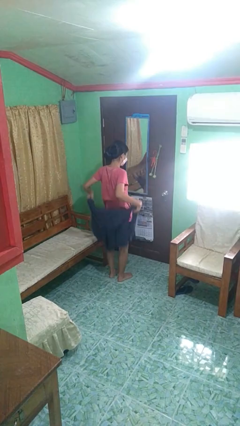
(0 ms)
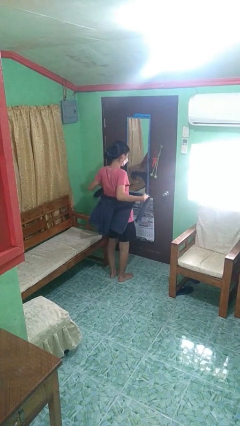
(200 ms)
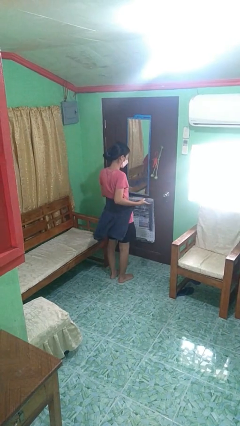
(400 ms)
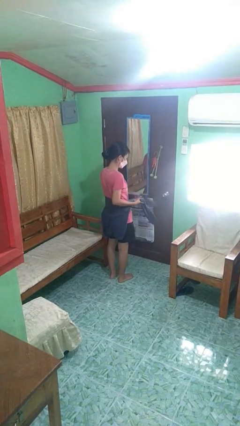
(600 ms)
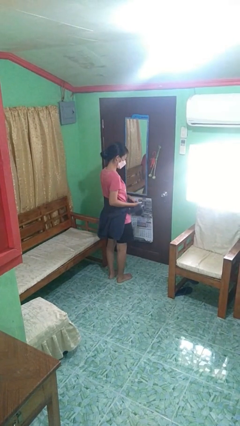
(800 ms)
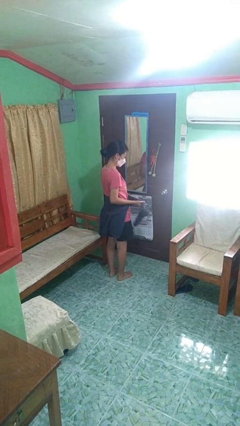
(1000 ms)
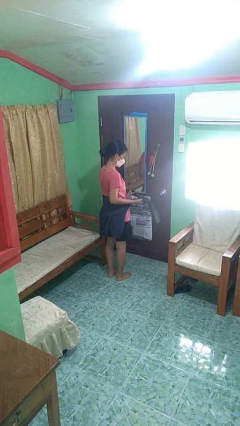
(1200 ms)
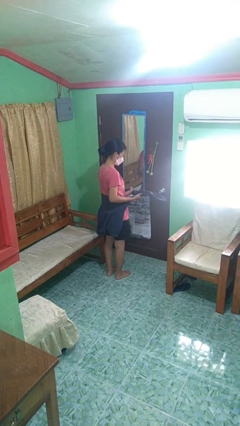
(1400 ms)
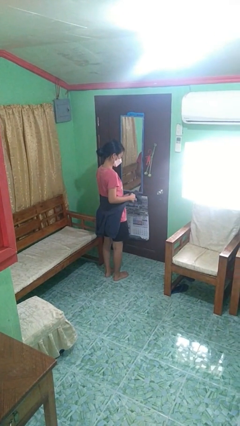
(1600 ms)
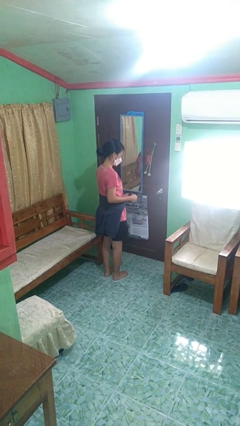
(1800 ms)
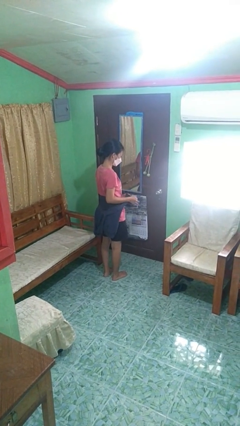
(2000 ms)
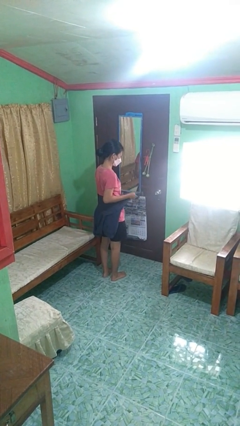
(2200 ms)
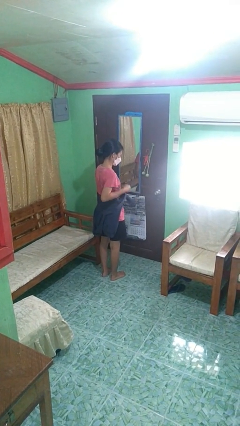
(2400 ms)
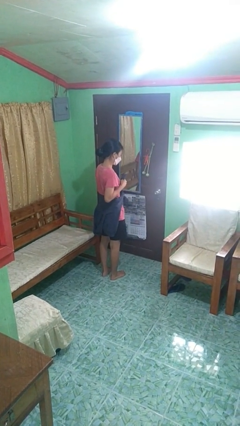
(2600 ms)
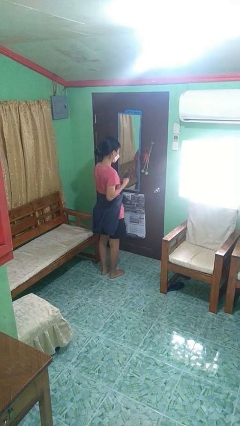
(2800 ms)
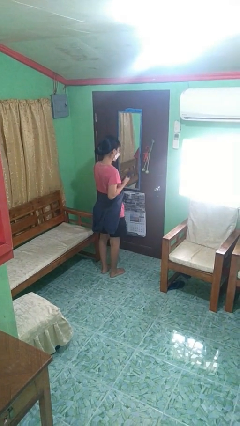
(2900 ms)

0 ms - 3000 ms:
person ties jacket around waist

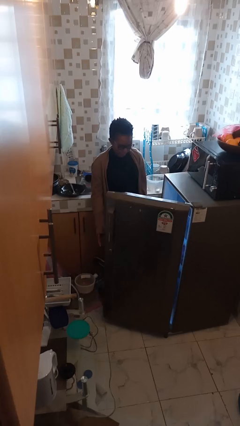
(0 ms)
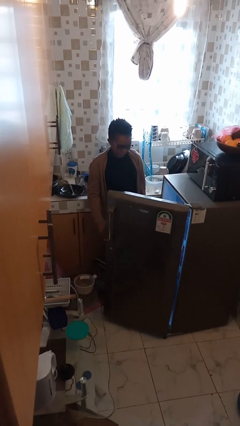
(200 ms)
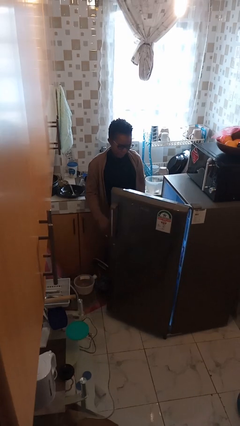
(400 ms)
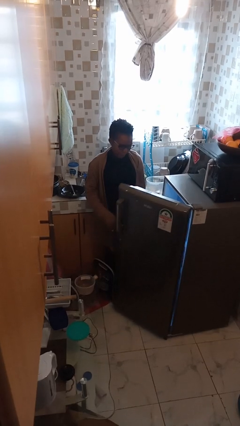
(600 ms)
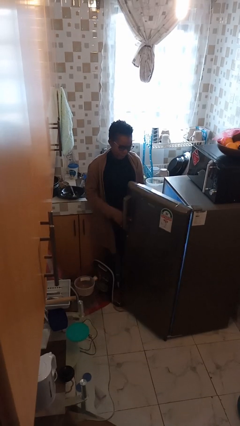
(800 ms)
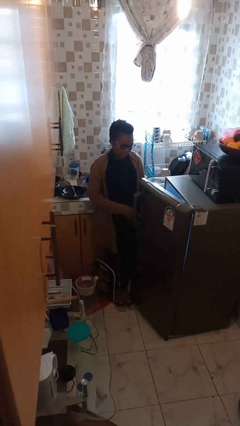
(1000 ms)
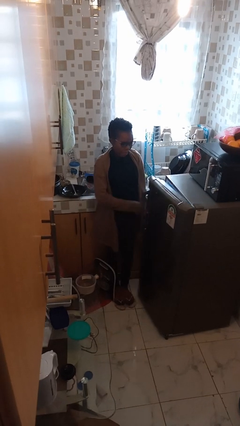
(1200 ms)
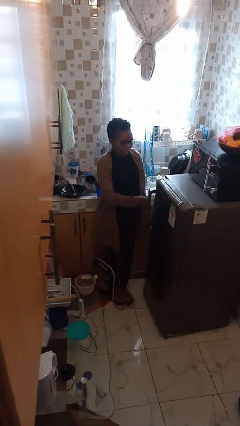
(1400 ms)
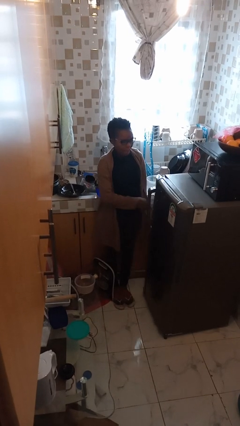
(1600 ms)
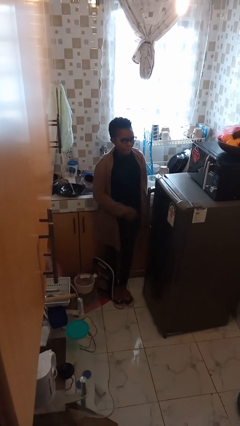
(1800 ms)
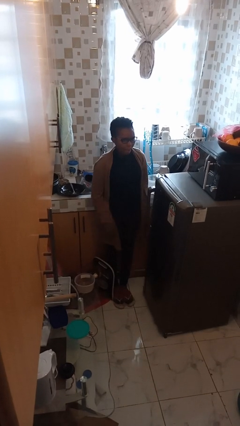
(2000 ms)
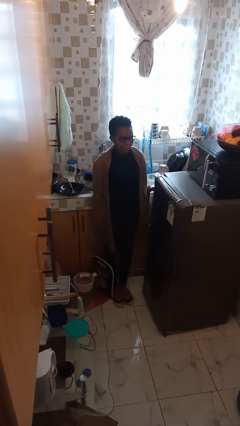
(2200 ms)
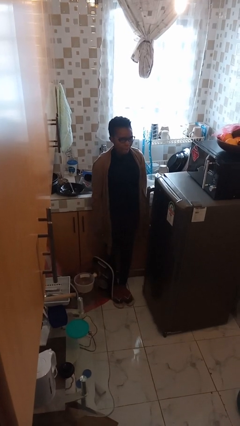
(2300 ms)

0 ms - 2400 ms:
person closes refrigerator

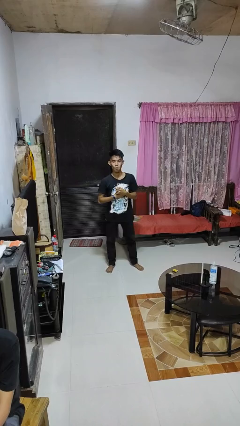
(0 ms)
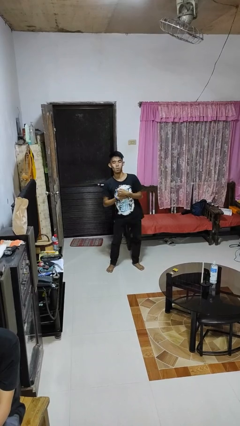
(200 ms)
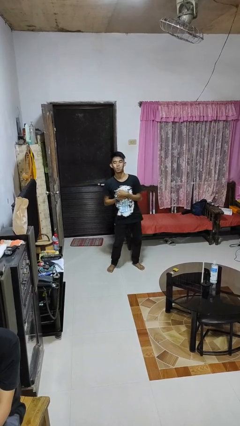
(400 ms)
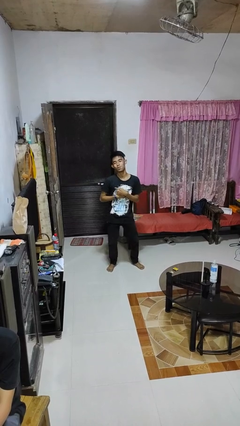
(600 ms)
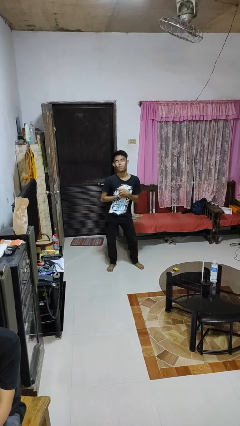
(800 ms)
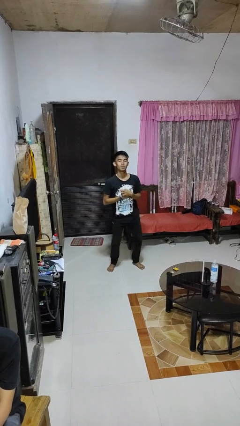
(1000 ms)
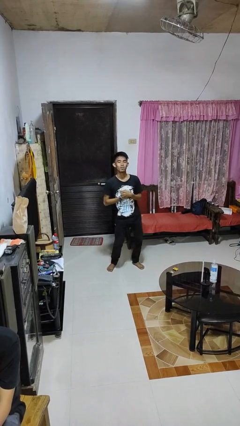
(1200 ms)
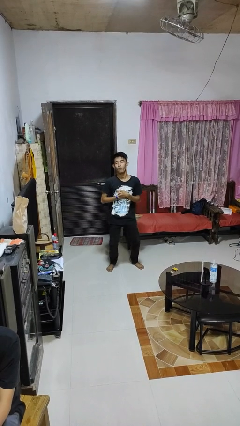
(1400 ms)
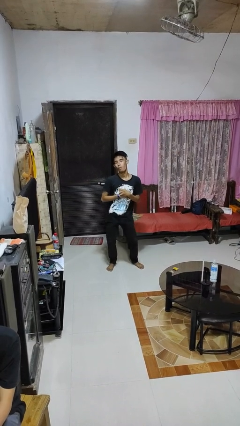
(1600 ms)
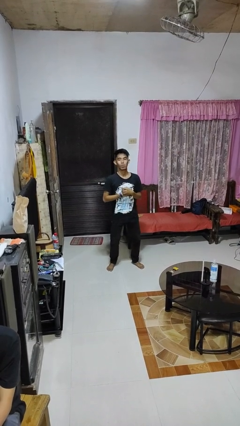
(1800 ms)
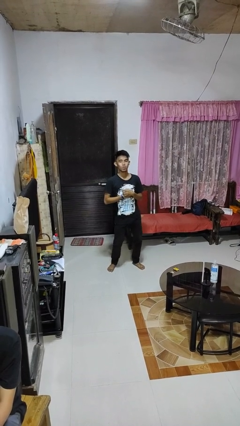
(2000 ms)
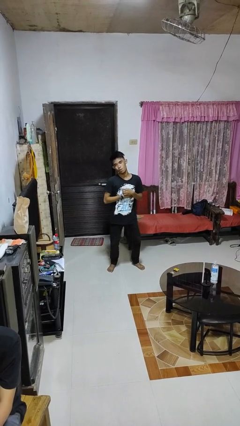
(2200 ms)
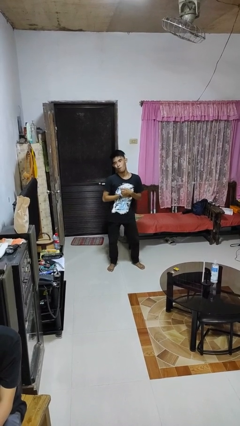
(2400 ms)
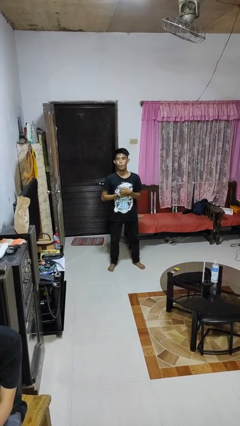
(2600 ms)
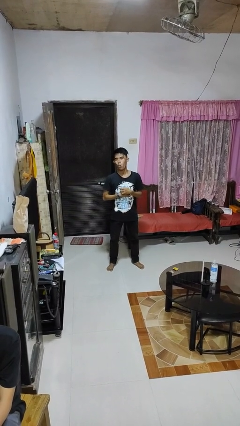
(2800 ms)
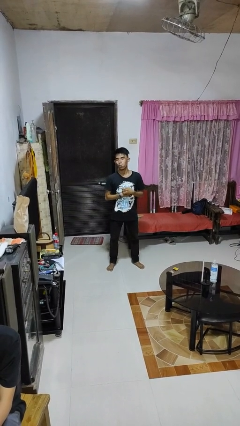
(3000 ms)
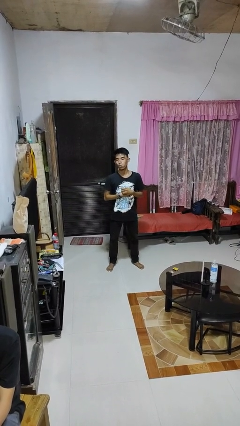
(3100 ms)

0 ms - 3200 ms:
person wiggles hips

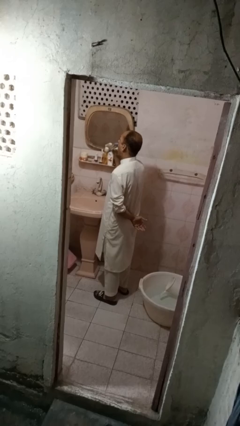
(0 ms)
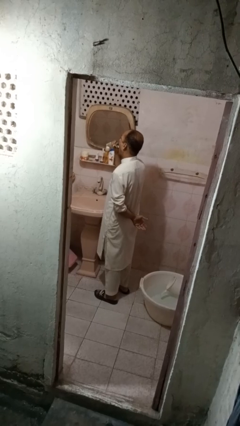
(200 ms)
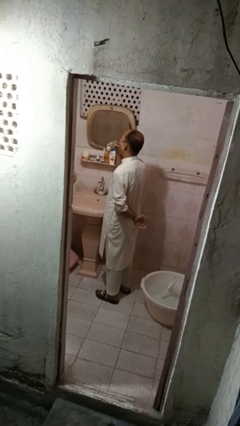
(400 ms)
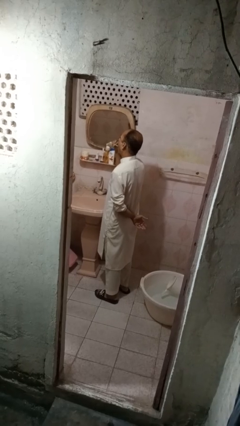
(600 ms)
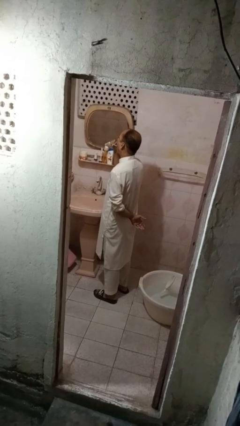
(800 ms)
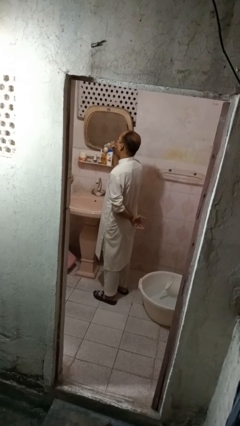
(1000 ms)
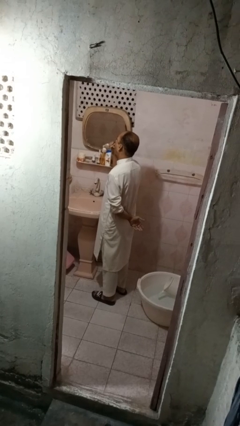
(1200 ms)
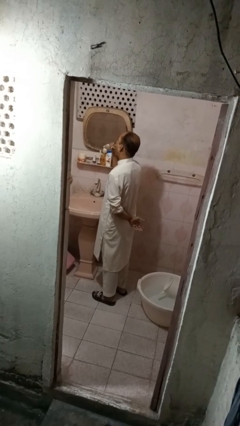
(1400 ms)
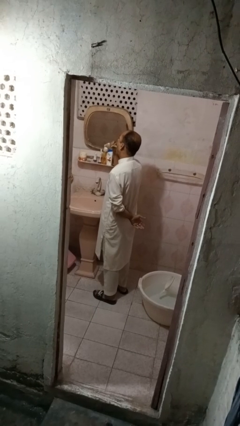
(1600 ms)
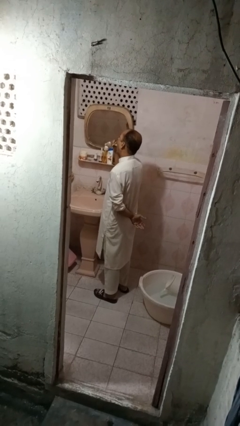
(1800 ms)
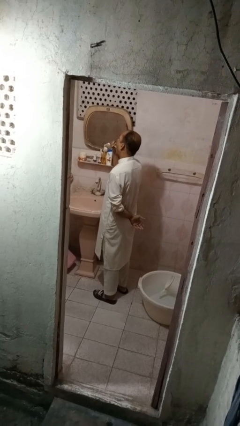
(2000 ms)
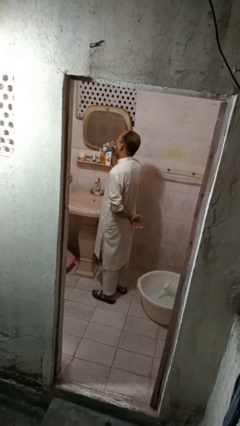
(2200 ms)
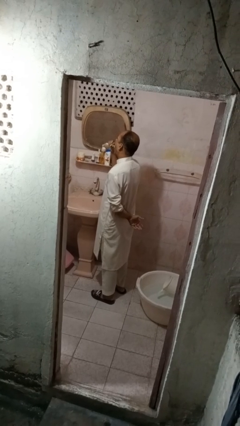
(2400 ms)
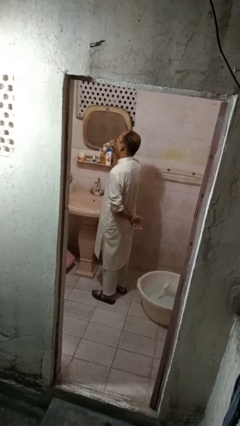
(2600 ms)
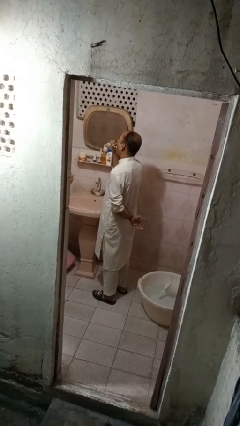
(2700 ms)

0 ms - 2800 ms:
person brushes teeth

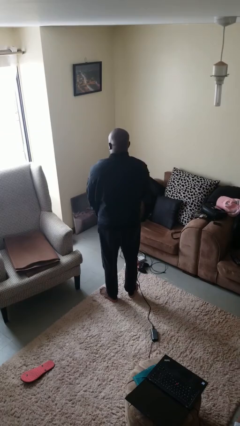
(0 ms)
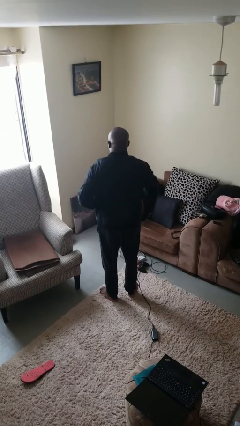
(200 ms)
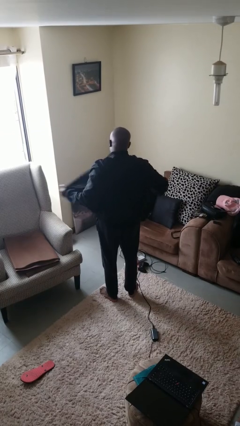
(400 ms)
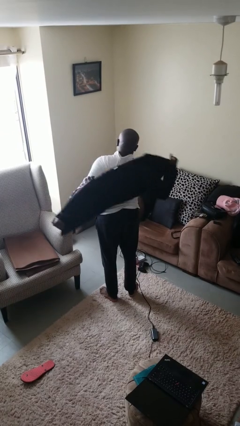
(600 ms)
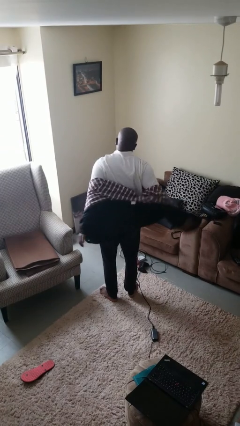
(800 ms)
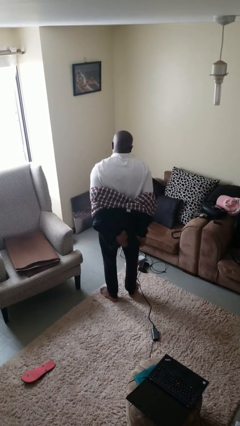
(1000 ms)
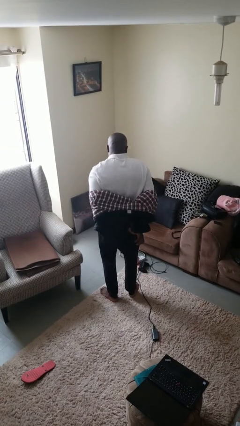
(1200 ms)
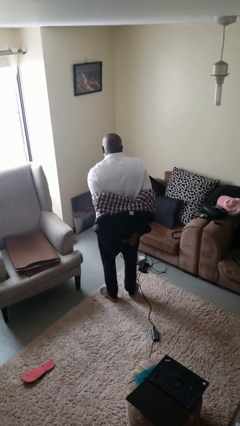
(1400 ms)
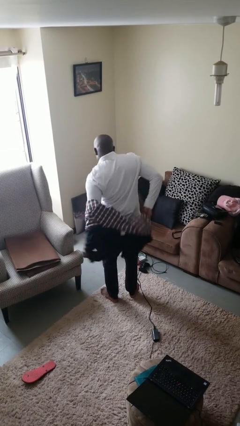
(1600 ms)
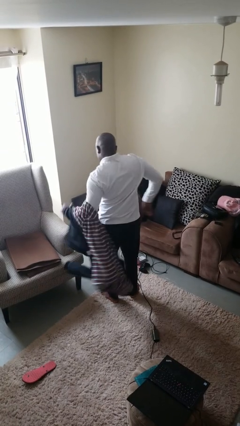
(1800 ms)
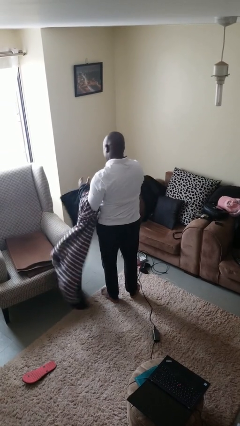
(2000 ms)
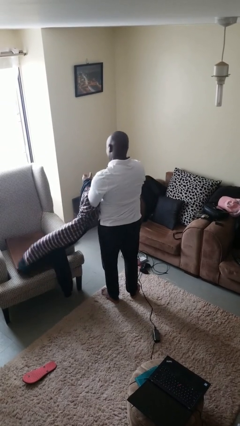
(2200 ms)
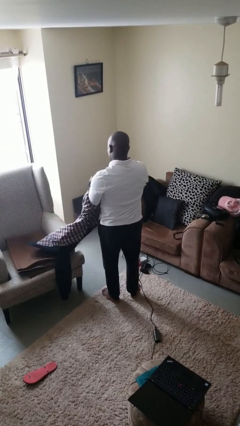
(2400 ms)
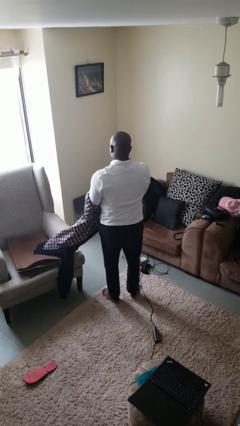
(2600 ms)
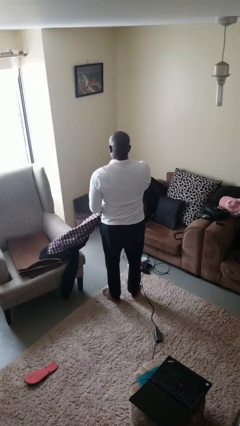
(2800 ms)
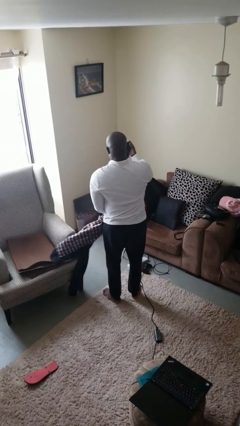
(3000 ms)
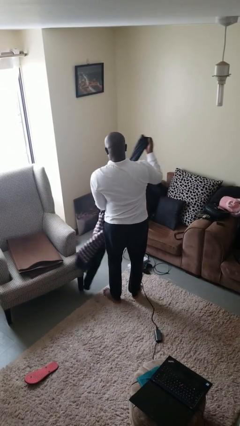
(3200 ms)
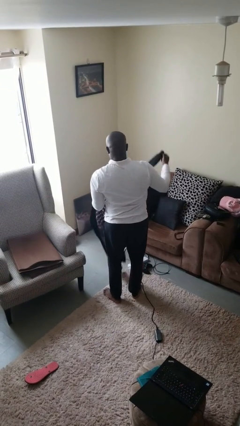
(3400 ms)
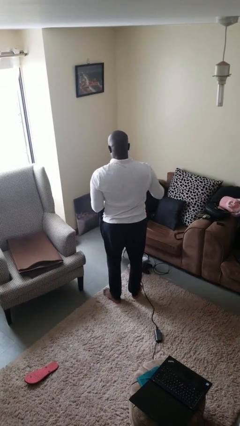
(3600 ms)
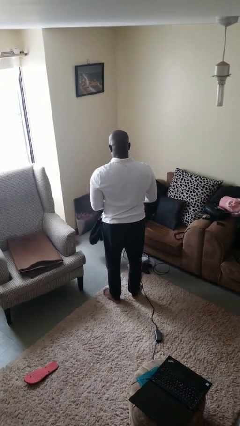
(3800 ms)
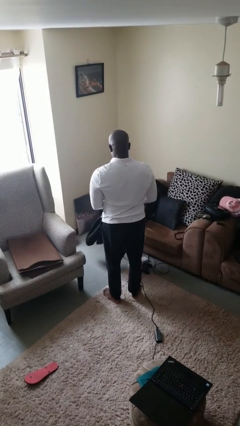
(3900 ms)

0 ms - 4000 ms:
person takes off jacket

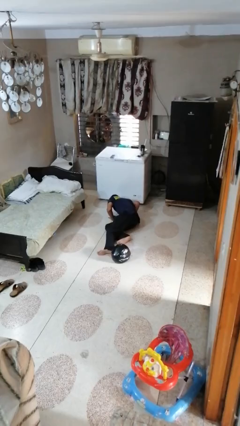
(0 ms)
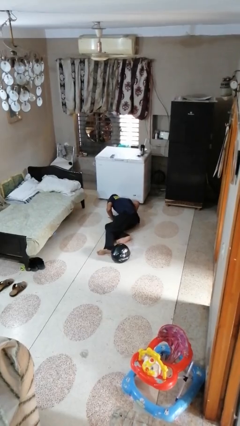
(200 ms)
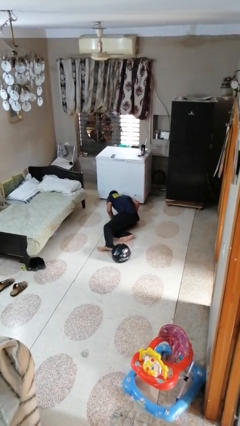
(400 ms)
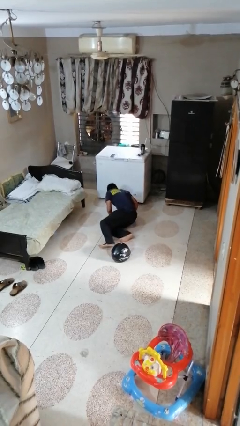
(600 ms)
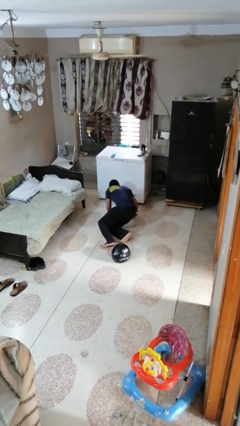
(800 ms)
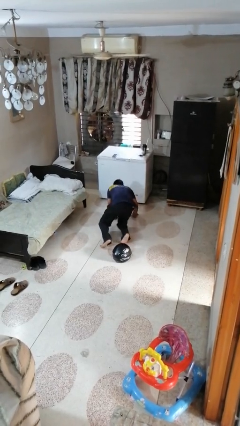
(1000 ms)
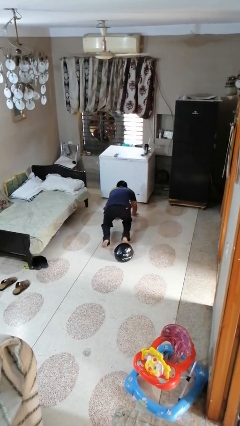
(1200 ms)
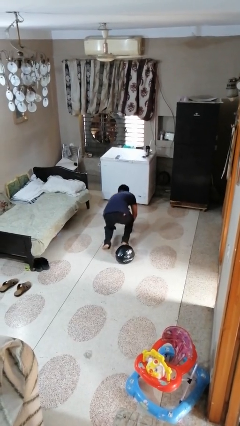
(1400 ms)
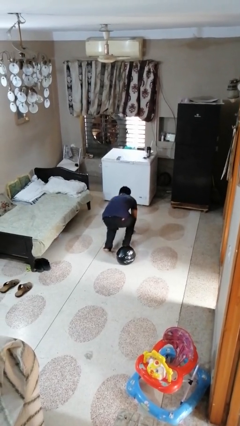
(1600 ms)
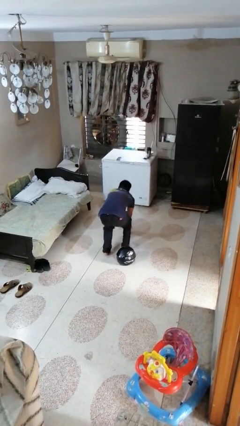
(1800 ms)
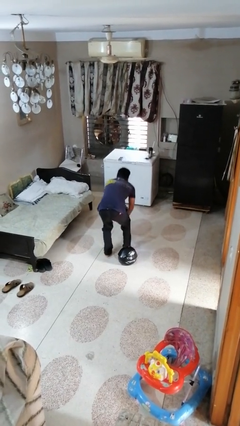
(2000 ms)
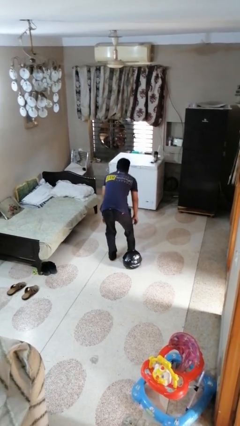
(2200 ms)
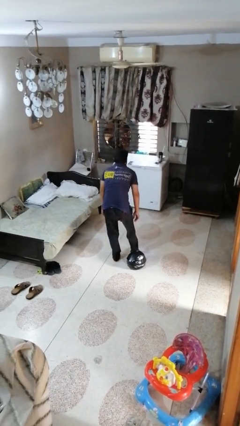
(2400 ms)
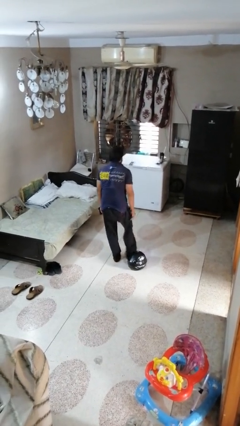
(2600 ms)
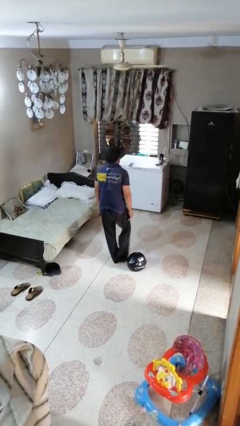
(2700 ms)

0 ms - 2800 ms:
person stands up from floor
